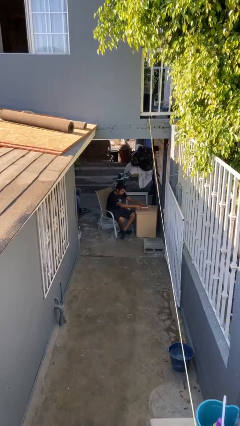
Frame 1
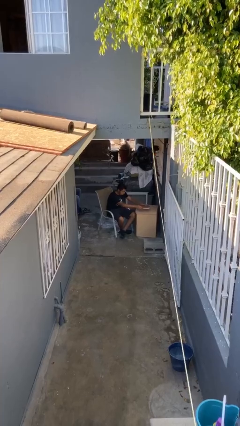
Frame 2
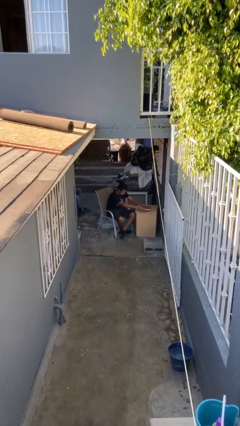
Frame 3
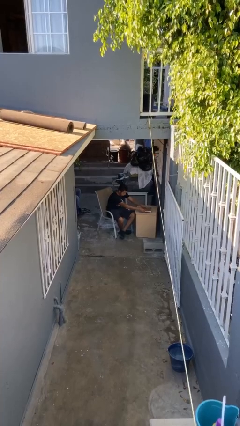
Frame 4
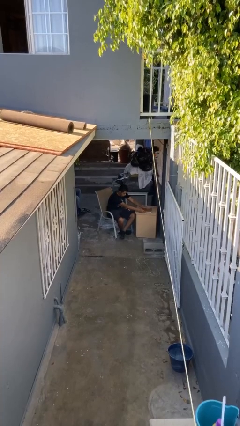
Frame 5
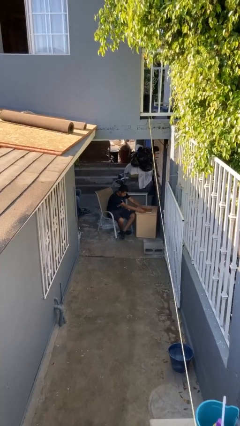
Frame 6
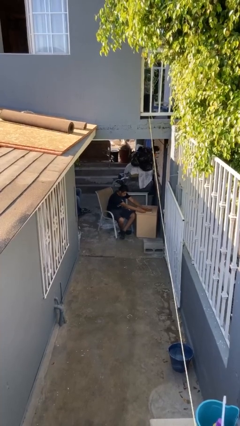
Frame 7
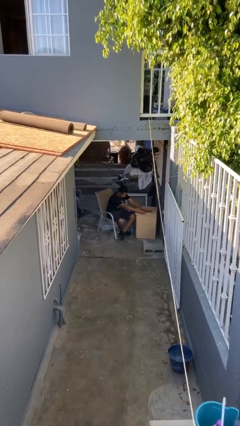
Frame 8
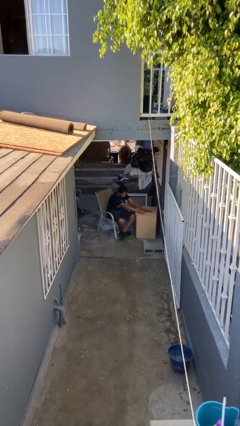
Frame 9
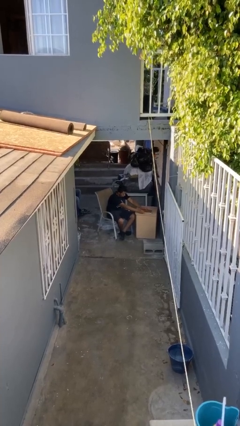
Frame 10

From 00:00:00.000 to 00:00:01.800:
person puts down object on table

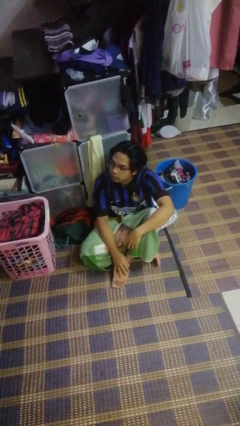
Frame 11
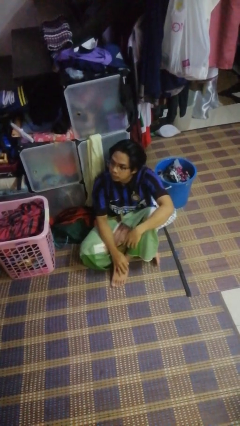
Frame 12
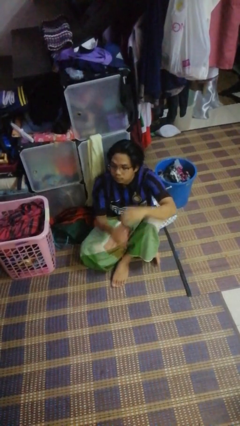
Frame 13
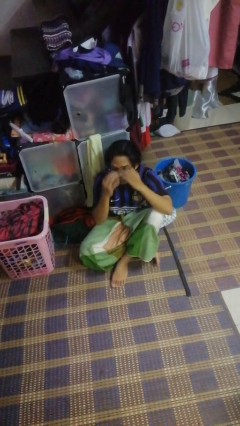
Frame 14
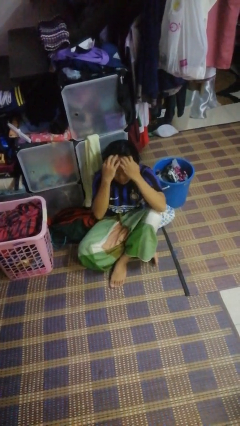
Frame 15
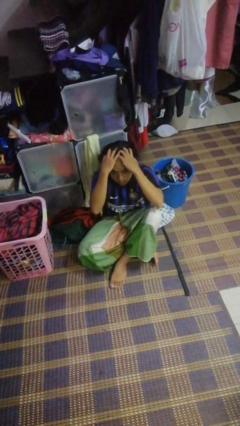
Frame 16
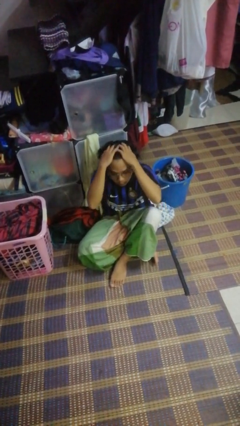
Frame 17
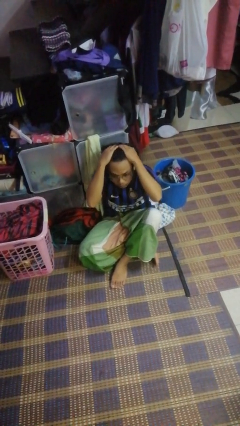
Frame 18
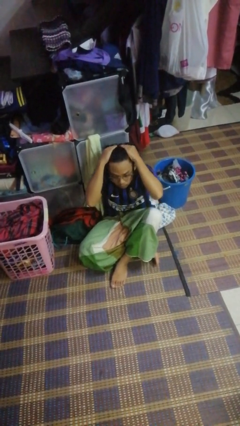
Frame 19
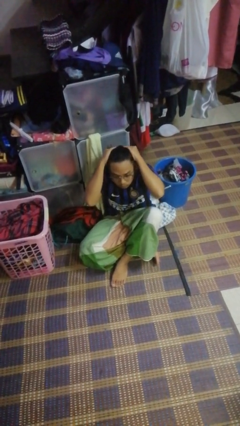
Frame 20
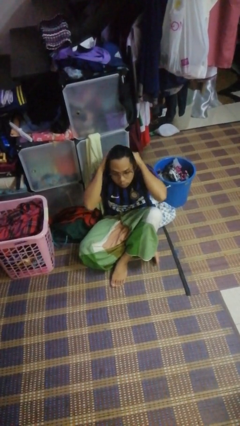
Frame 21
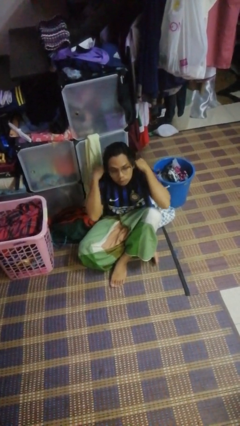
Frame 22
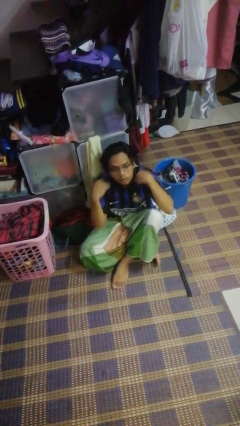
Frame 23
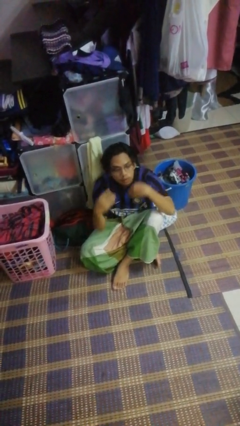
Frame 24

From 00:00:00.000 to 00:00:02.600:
person strokes hair

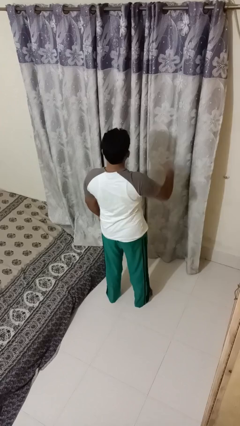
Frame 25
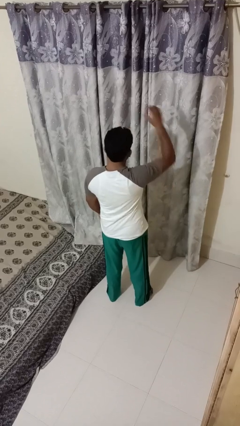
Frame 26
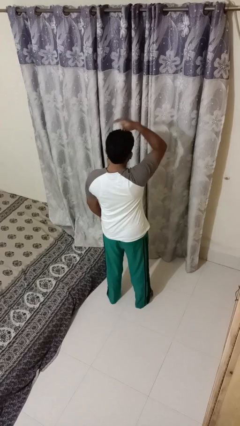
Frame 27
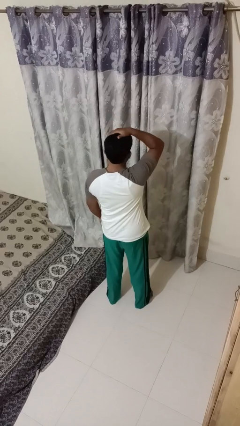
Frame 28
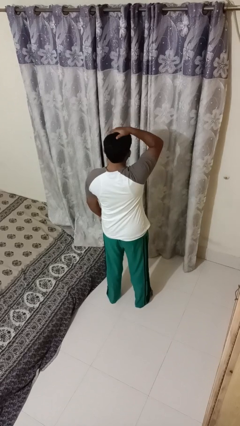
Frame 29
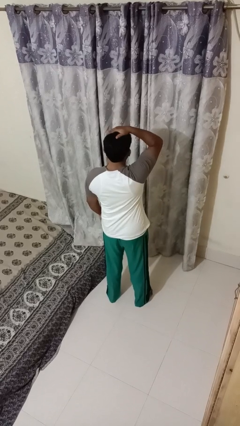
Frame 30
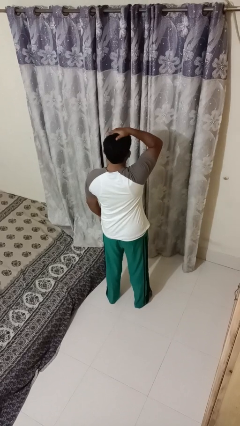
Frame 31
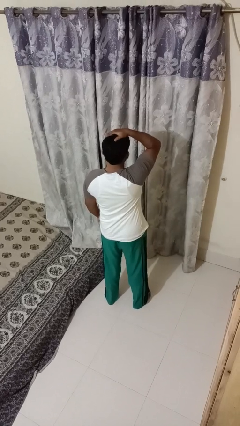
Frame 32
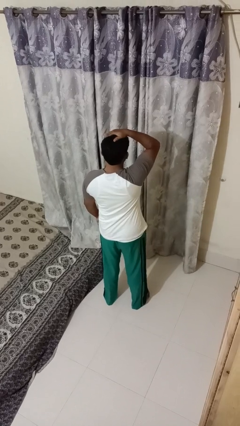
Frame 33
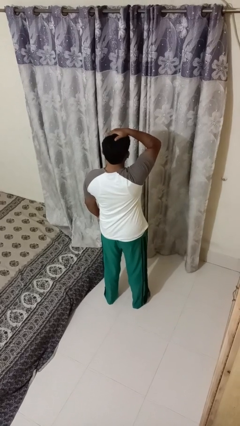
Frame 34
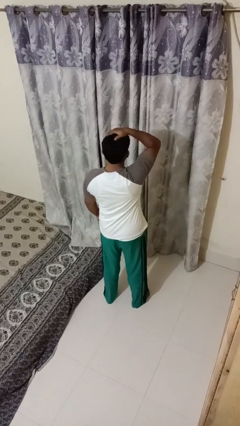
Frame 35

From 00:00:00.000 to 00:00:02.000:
person pats head

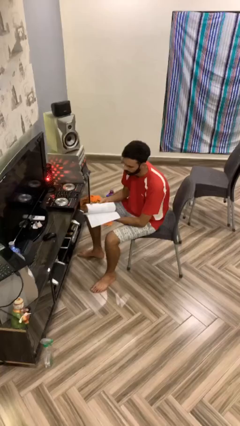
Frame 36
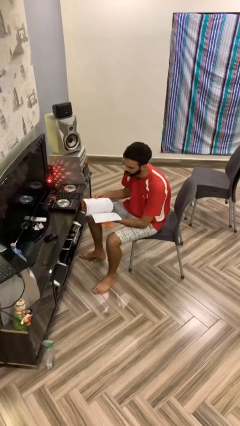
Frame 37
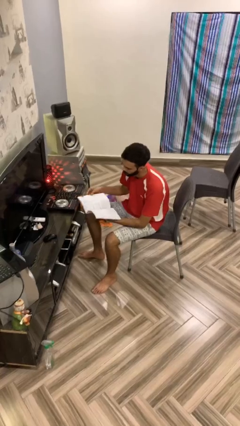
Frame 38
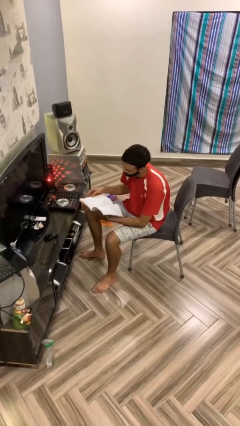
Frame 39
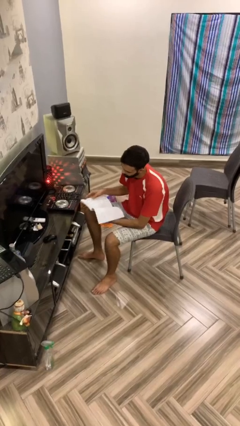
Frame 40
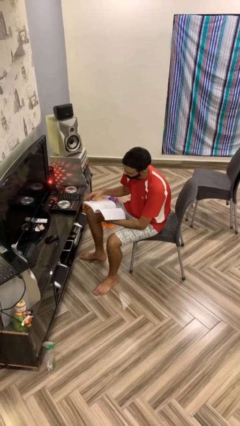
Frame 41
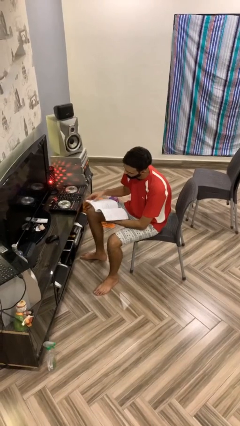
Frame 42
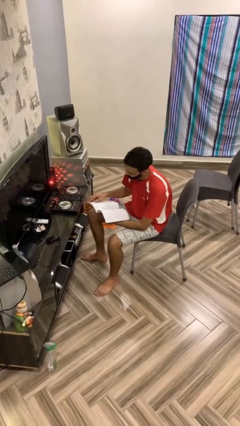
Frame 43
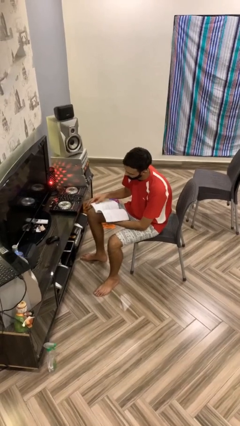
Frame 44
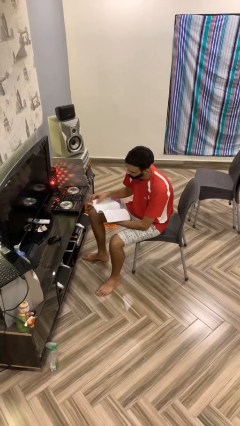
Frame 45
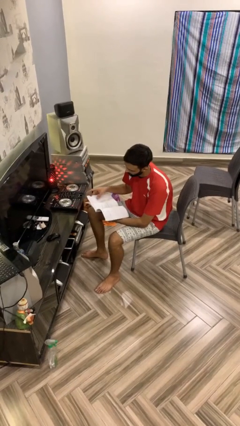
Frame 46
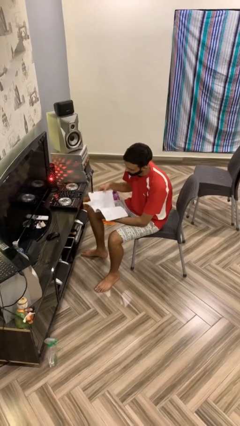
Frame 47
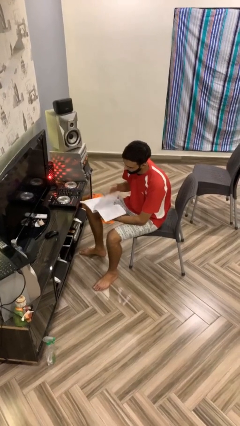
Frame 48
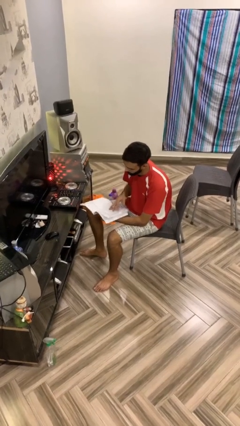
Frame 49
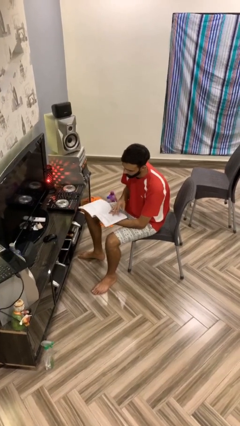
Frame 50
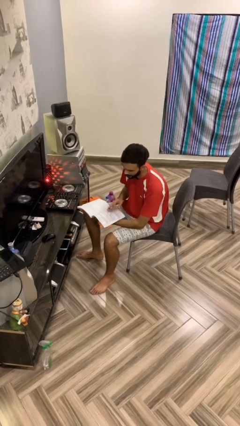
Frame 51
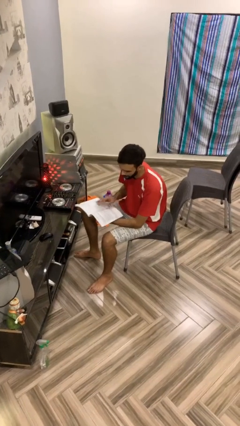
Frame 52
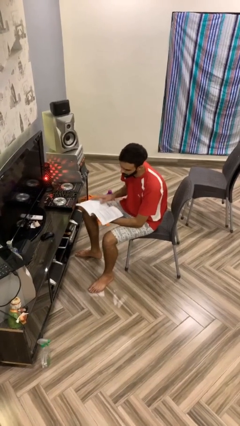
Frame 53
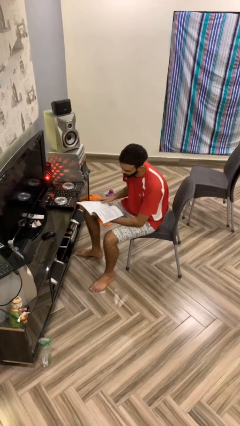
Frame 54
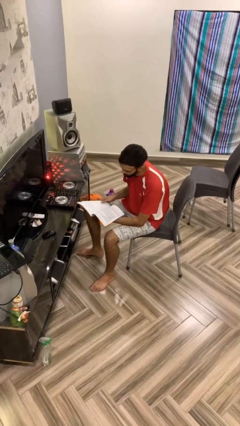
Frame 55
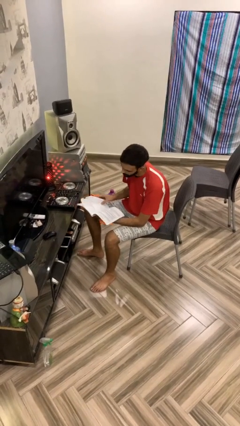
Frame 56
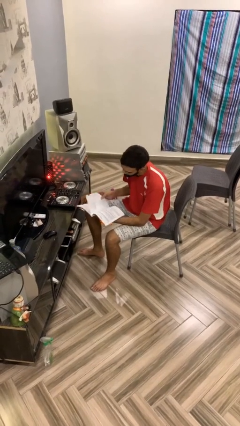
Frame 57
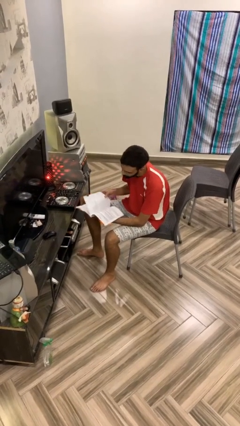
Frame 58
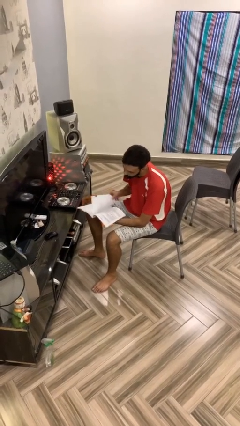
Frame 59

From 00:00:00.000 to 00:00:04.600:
person reads document

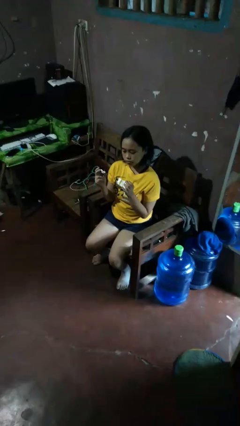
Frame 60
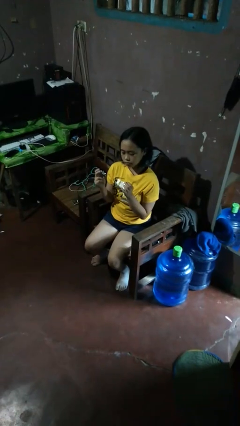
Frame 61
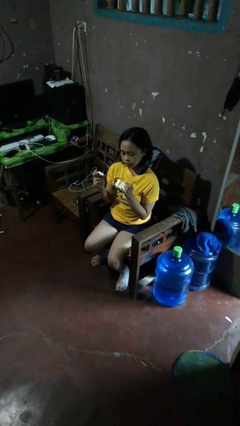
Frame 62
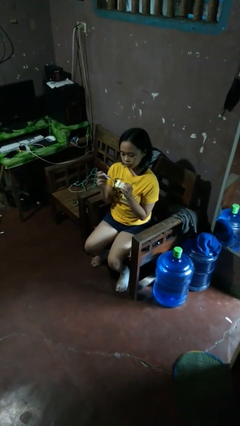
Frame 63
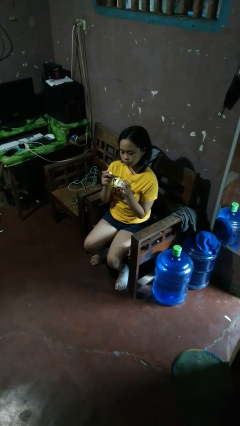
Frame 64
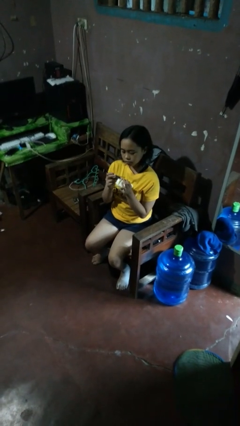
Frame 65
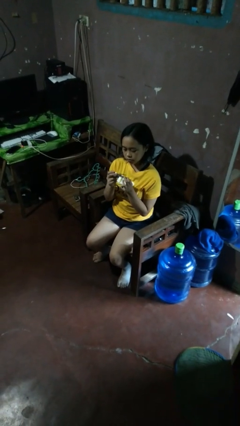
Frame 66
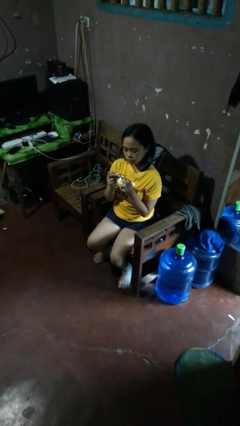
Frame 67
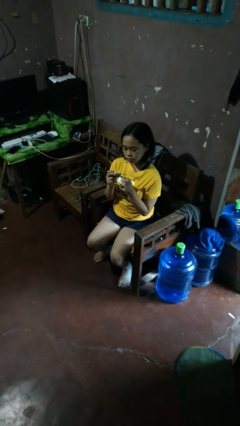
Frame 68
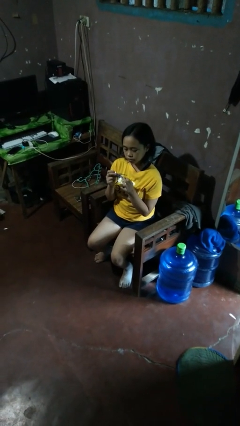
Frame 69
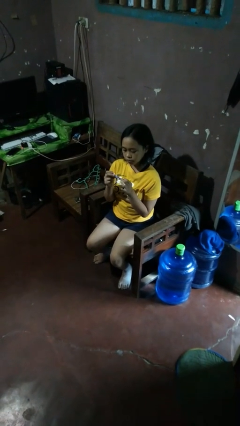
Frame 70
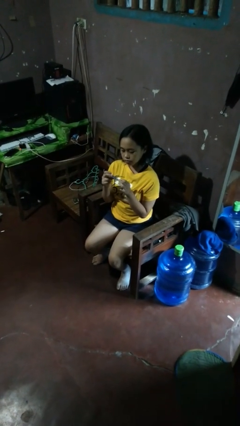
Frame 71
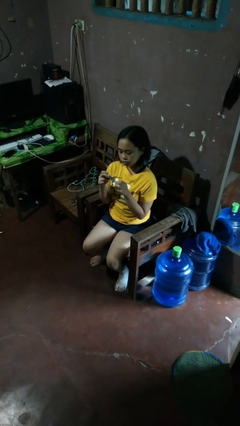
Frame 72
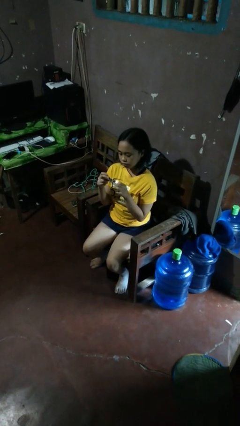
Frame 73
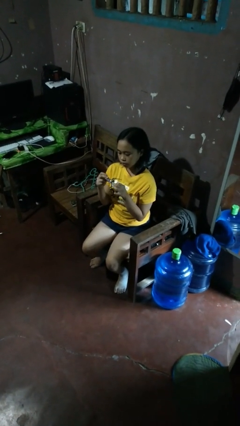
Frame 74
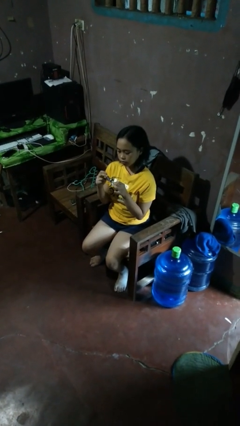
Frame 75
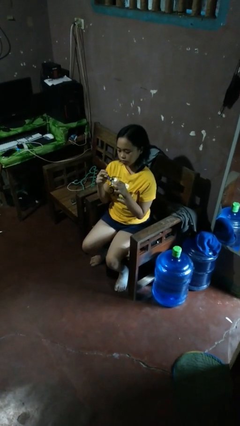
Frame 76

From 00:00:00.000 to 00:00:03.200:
person clips fingernails

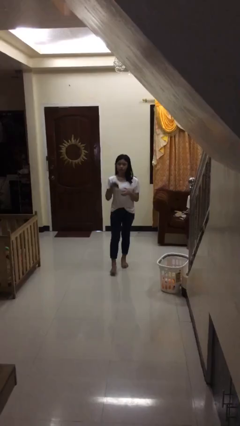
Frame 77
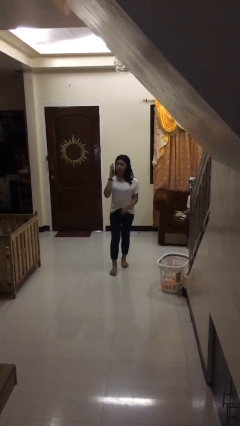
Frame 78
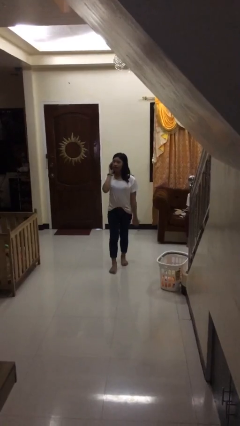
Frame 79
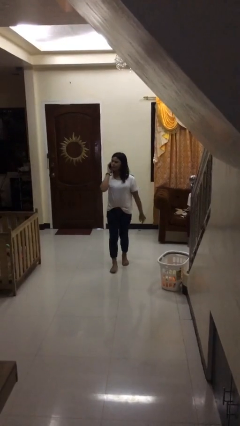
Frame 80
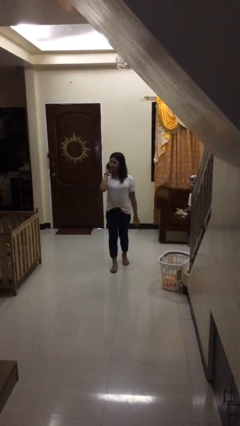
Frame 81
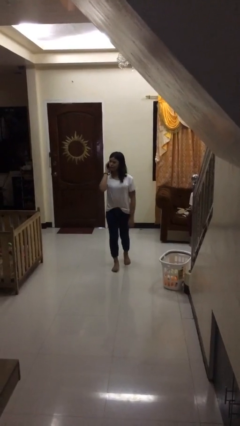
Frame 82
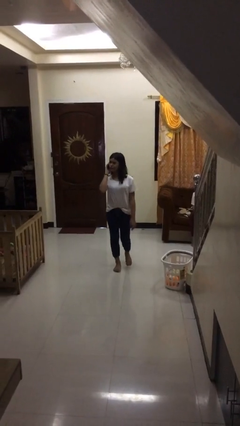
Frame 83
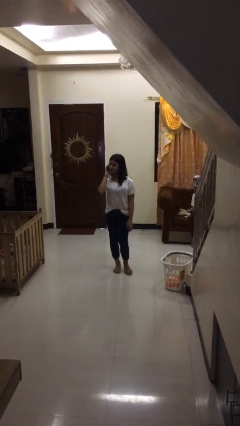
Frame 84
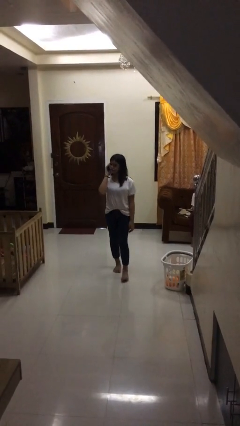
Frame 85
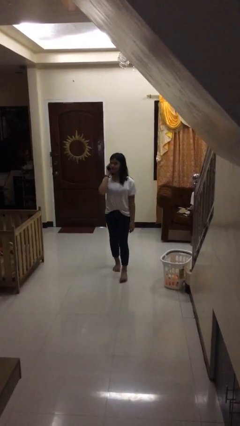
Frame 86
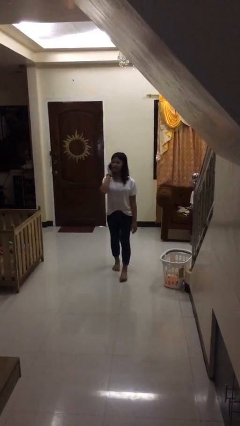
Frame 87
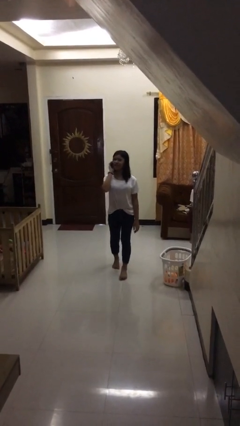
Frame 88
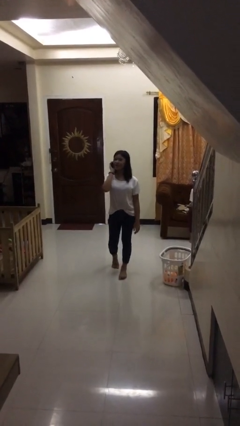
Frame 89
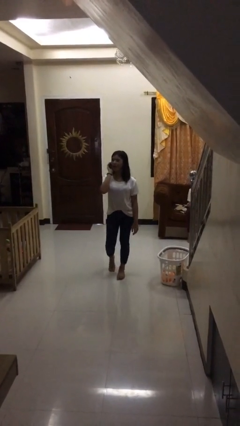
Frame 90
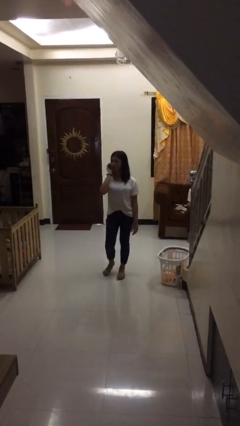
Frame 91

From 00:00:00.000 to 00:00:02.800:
person talks on phone
